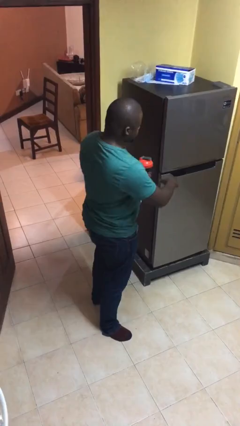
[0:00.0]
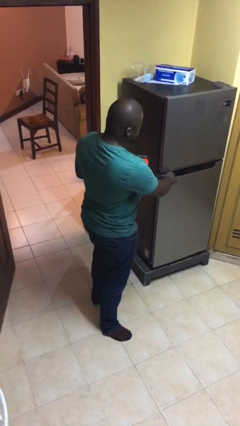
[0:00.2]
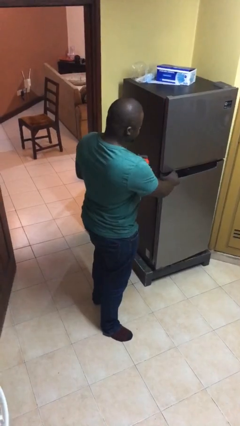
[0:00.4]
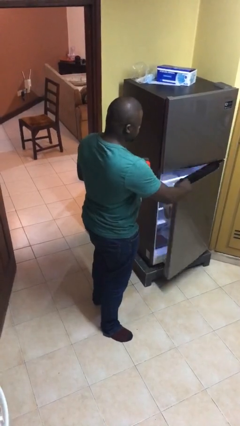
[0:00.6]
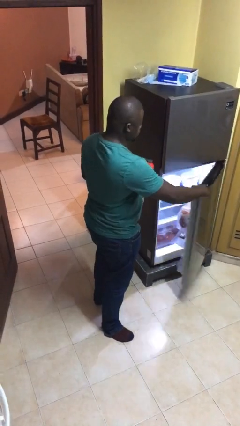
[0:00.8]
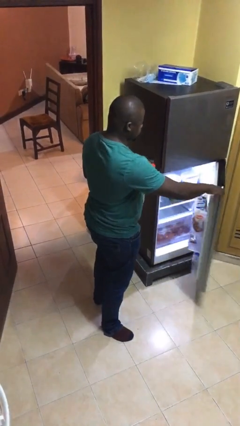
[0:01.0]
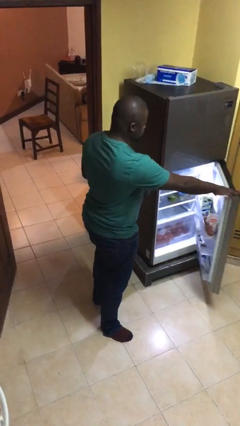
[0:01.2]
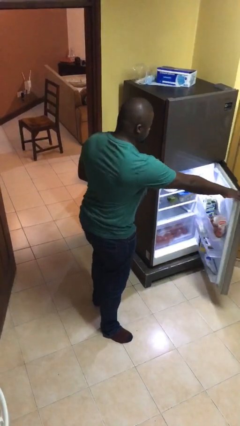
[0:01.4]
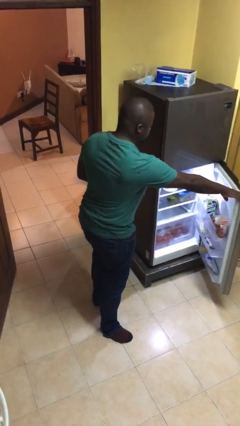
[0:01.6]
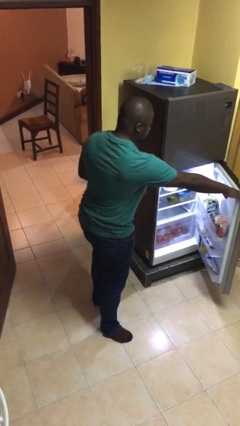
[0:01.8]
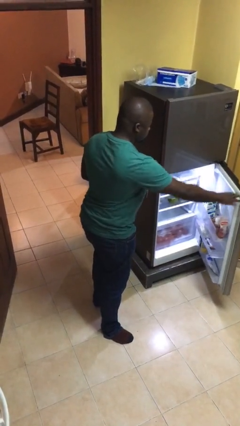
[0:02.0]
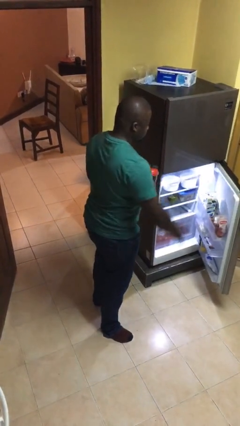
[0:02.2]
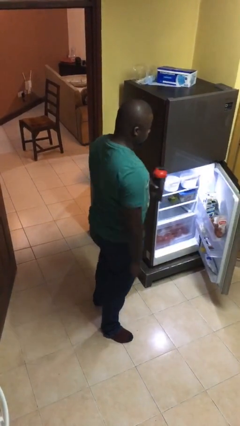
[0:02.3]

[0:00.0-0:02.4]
person opens refrigerator

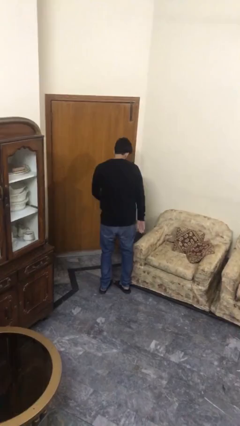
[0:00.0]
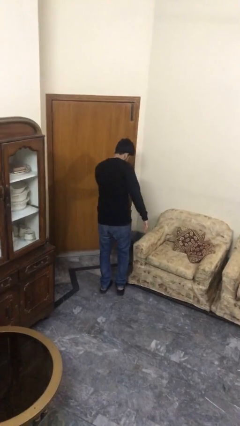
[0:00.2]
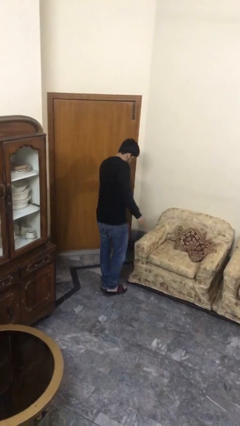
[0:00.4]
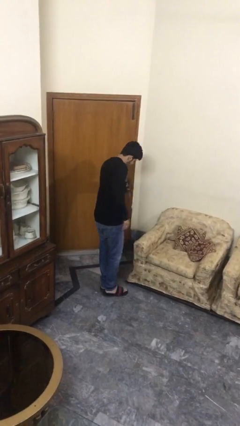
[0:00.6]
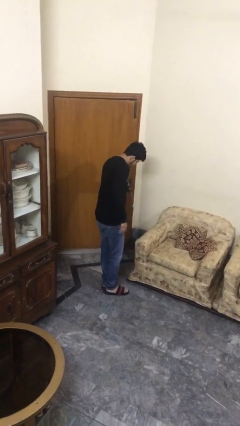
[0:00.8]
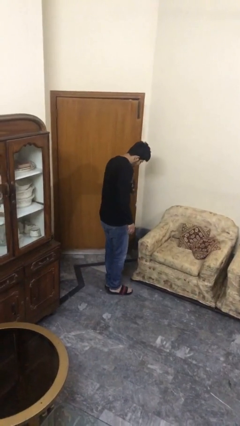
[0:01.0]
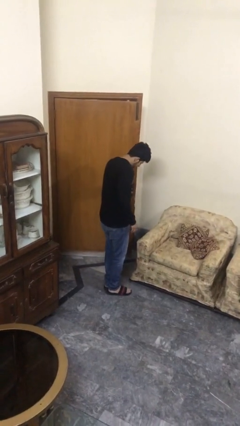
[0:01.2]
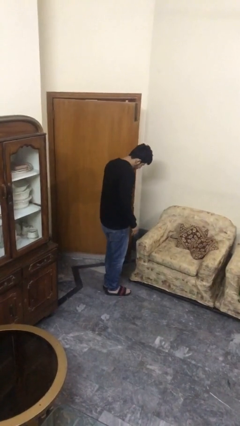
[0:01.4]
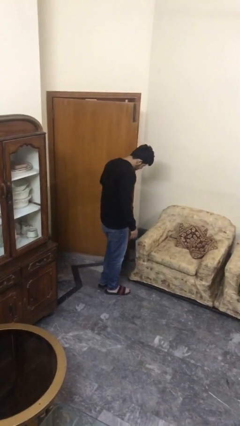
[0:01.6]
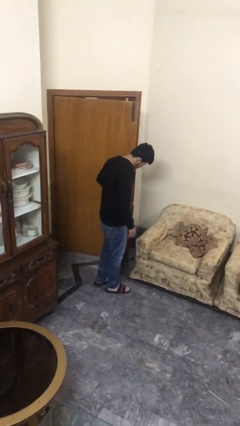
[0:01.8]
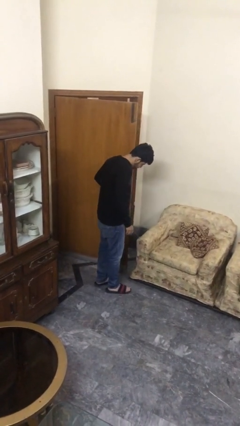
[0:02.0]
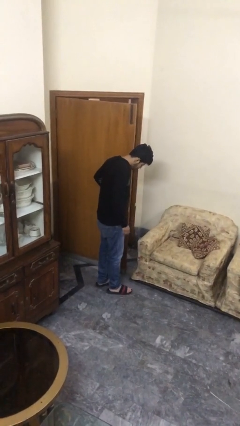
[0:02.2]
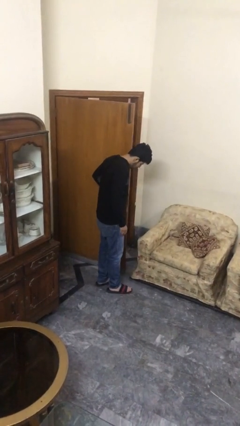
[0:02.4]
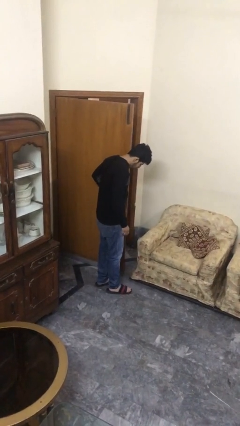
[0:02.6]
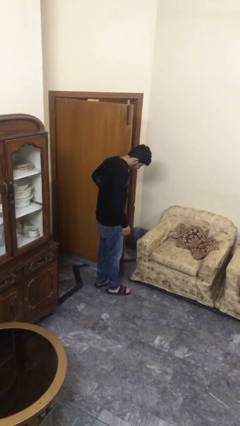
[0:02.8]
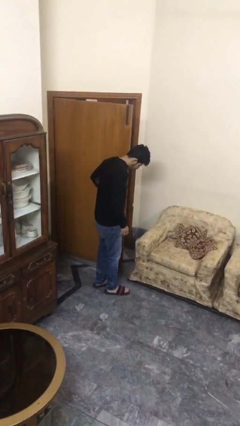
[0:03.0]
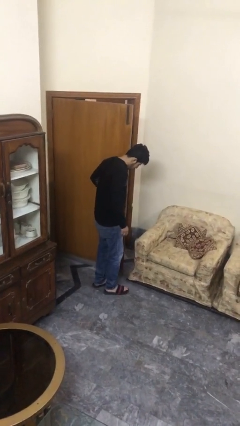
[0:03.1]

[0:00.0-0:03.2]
person opens facility door

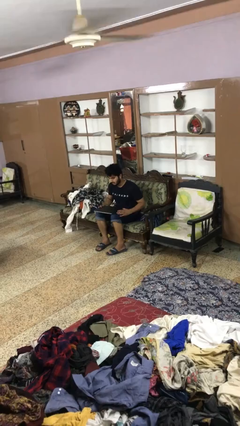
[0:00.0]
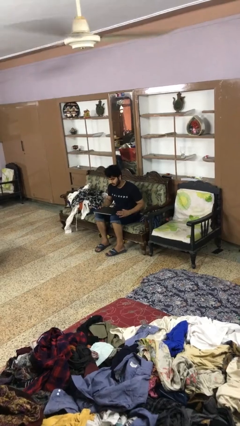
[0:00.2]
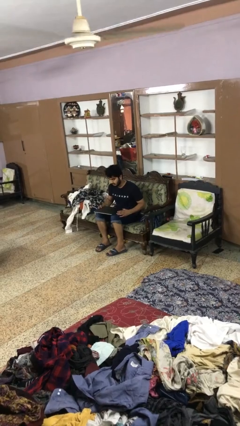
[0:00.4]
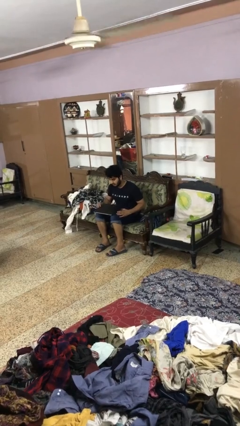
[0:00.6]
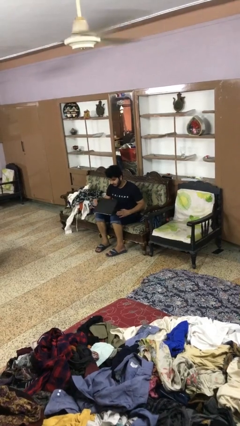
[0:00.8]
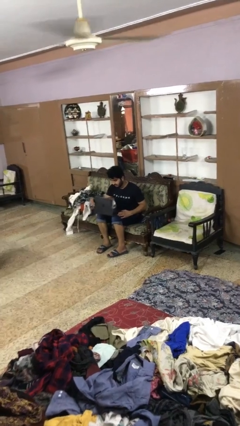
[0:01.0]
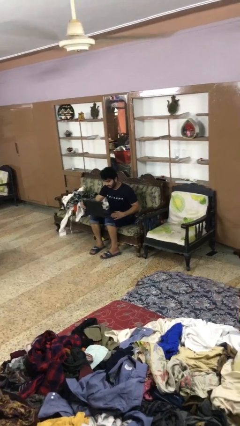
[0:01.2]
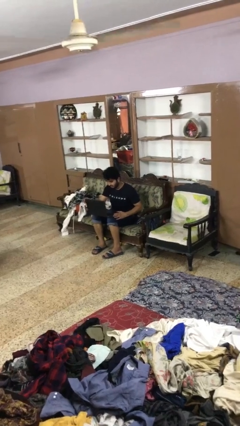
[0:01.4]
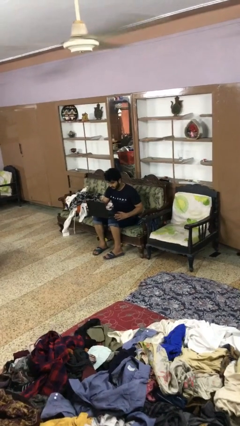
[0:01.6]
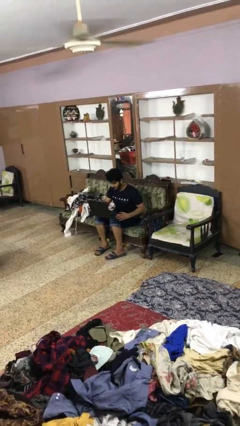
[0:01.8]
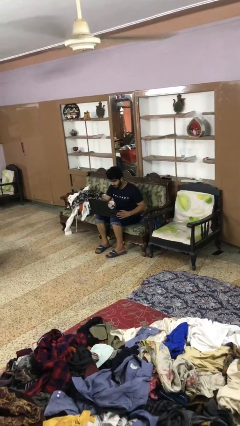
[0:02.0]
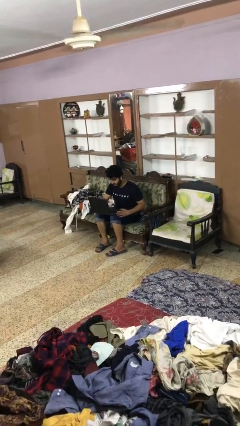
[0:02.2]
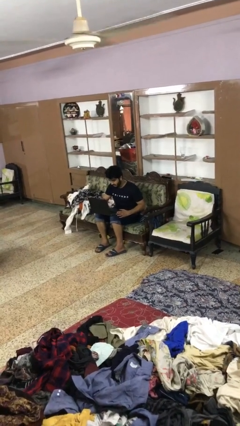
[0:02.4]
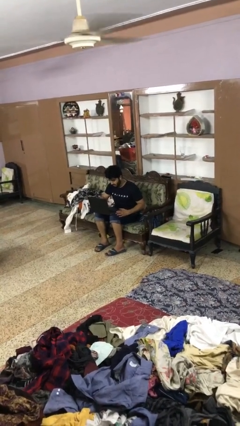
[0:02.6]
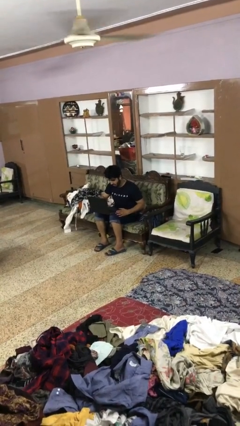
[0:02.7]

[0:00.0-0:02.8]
person opens laptop

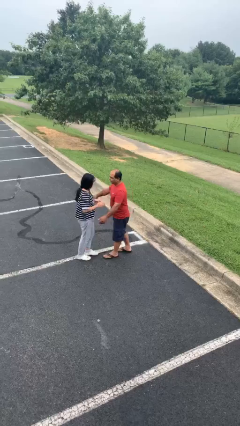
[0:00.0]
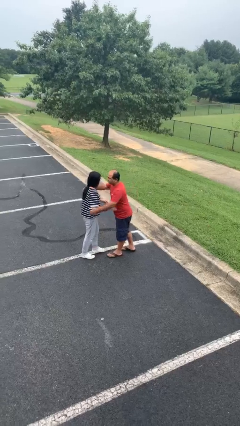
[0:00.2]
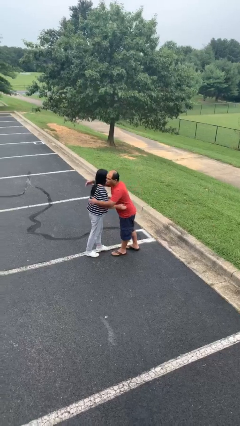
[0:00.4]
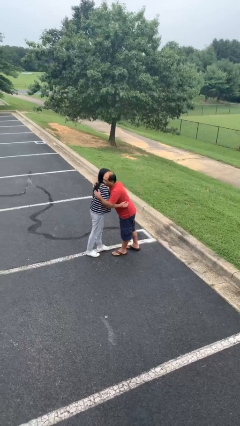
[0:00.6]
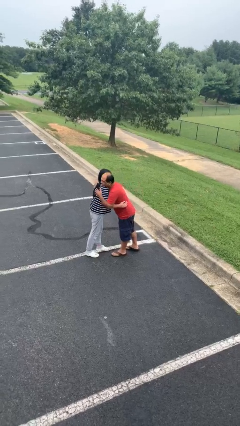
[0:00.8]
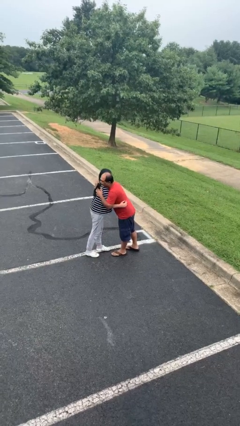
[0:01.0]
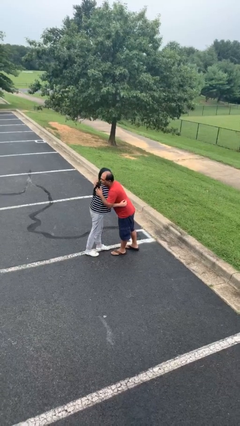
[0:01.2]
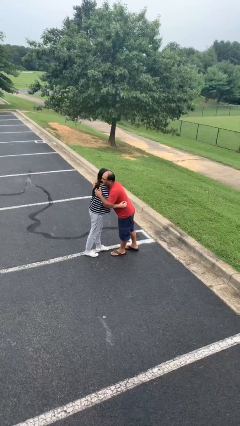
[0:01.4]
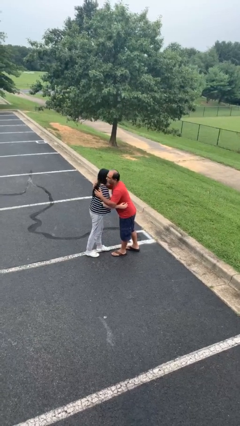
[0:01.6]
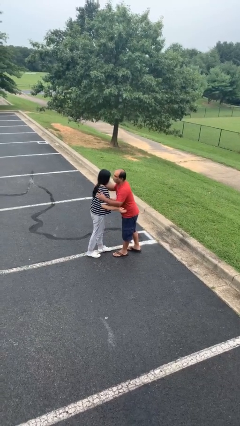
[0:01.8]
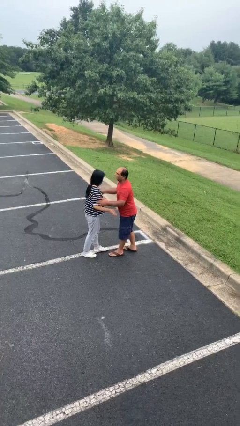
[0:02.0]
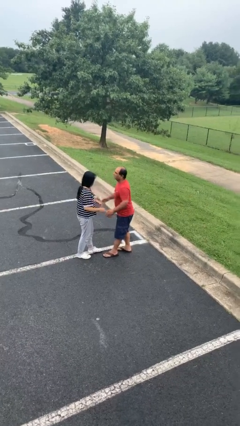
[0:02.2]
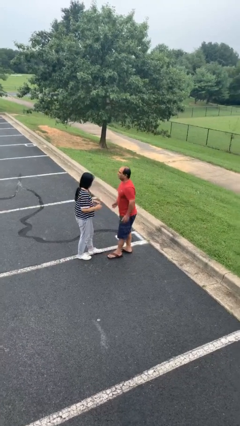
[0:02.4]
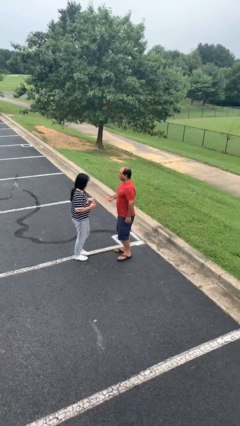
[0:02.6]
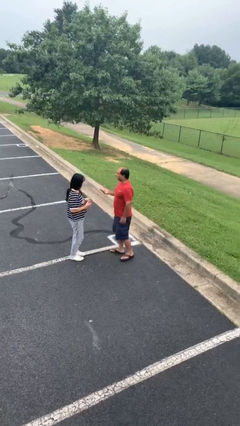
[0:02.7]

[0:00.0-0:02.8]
person embraces person

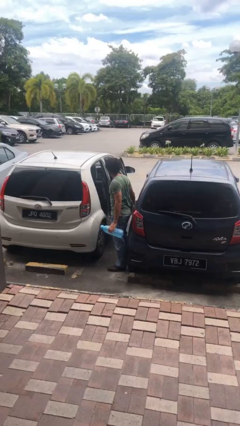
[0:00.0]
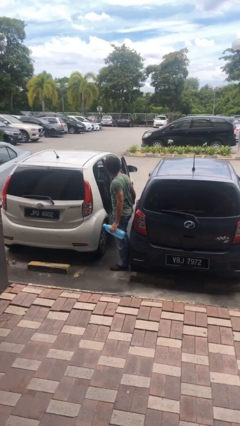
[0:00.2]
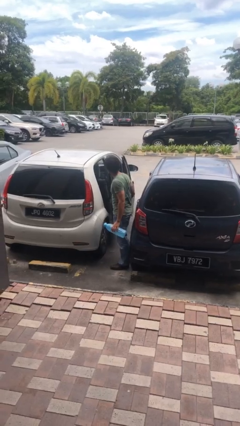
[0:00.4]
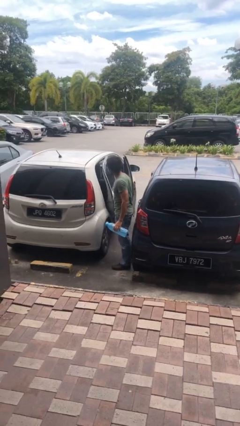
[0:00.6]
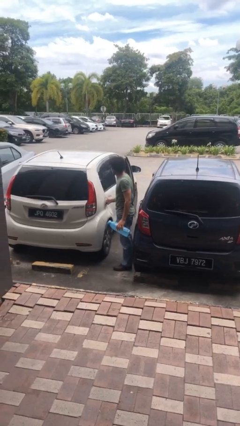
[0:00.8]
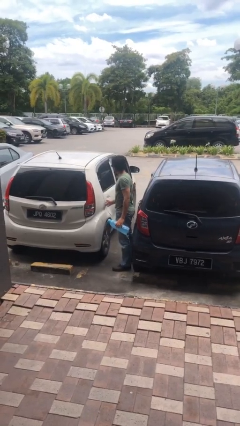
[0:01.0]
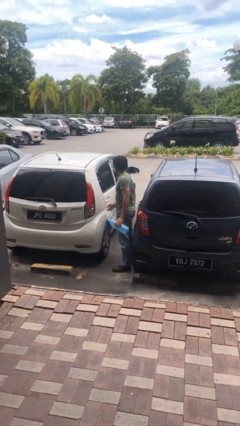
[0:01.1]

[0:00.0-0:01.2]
person closes car door

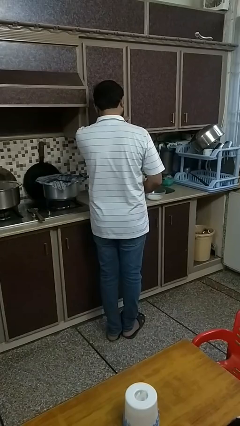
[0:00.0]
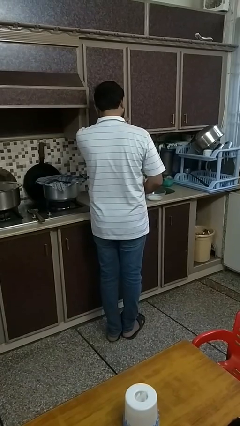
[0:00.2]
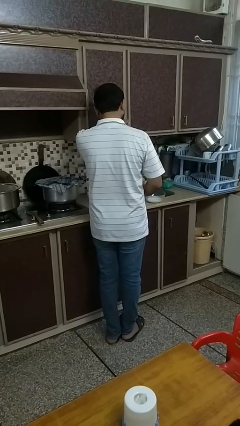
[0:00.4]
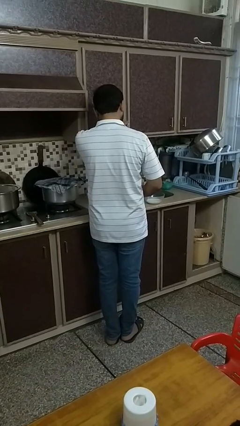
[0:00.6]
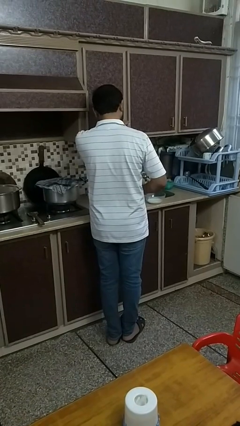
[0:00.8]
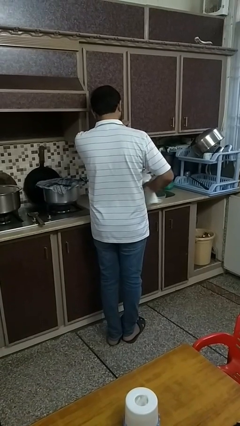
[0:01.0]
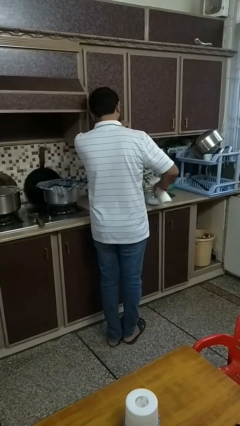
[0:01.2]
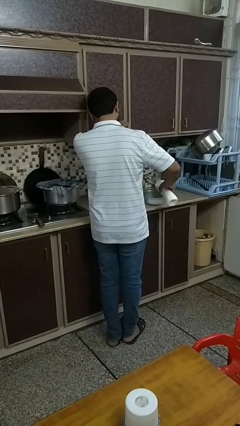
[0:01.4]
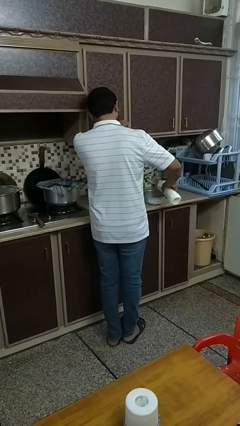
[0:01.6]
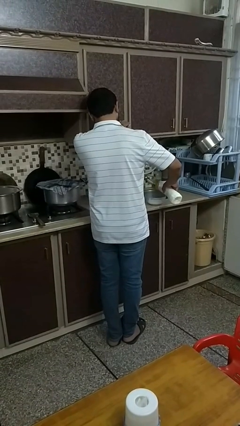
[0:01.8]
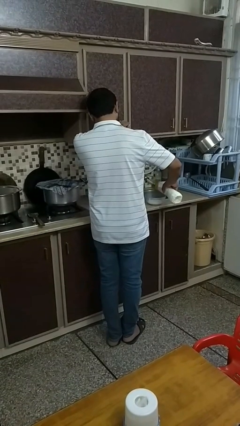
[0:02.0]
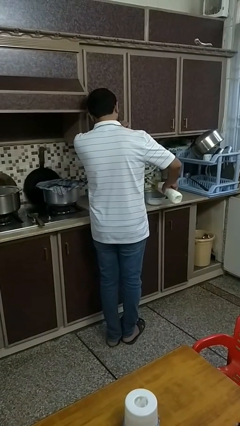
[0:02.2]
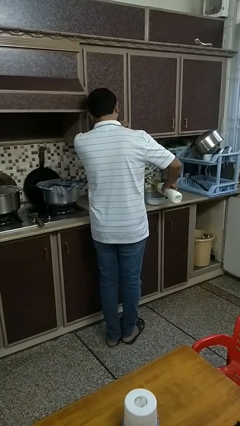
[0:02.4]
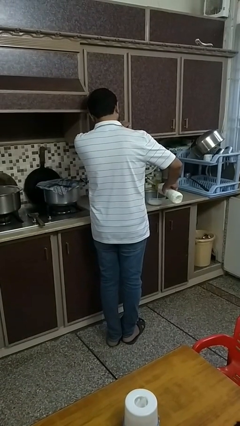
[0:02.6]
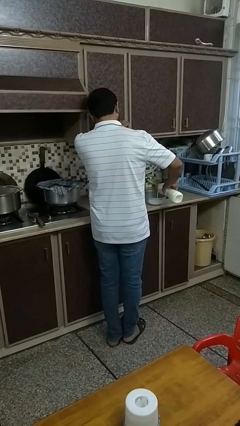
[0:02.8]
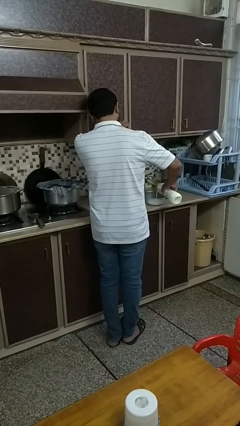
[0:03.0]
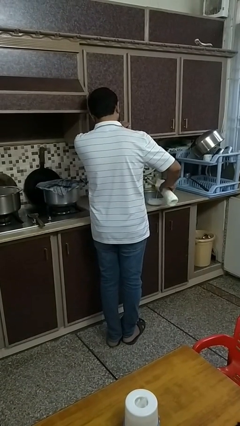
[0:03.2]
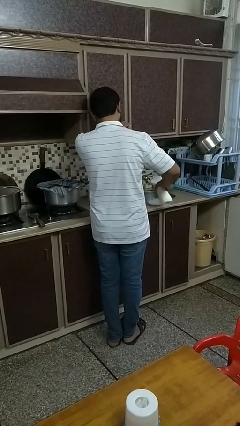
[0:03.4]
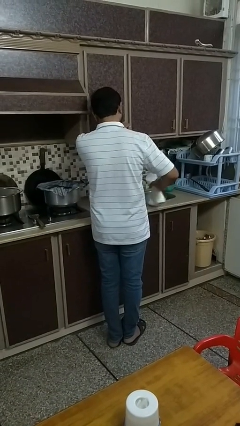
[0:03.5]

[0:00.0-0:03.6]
person pours into bowl

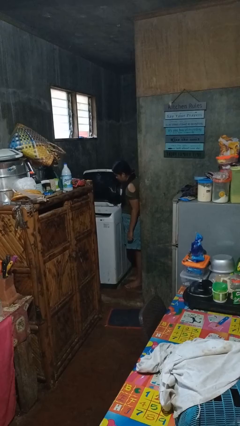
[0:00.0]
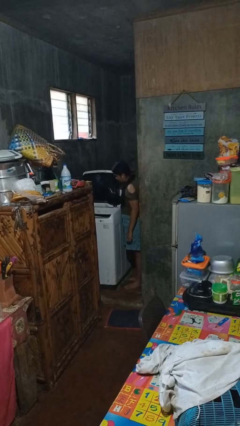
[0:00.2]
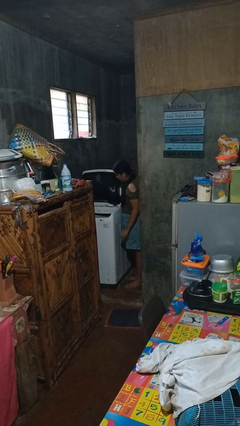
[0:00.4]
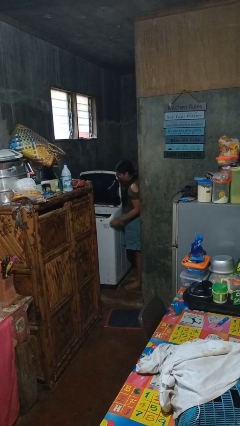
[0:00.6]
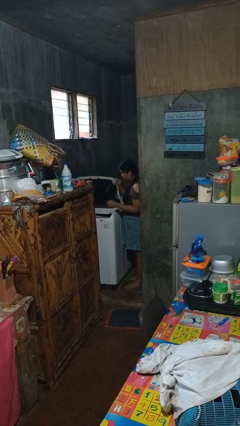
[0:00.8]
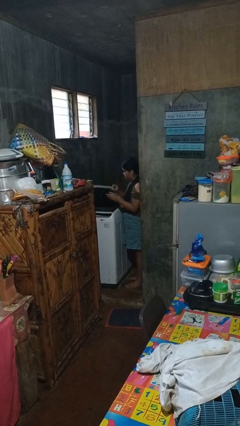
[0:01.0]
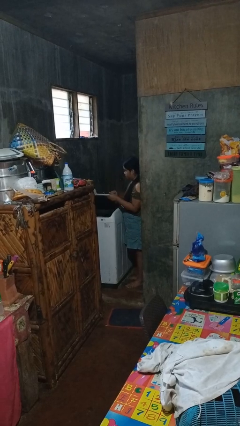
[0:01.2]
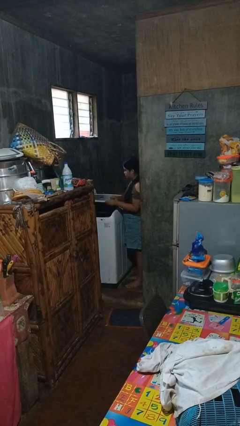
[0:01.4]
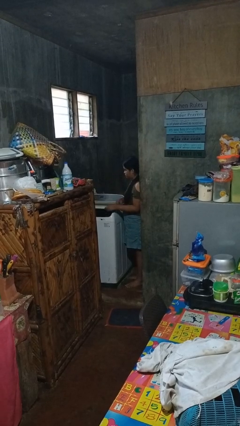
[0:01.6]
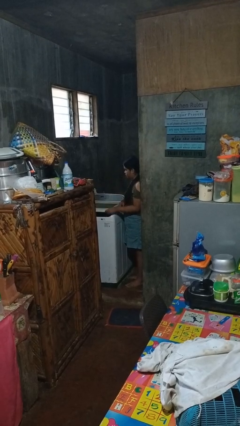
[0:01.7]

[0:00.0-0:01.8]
person closes clothes washer
